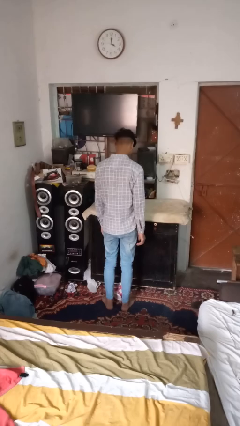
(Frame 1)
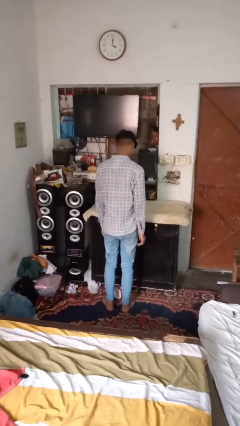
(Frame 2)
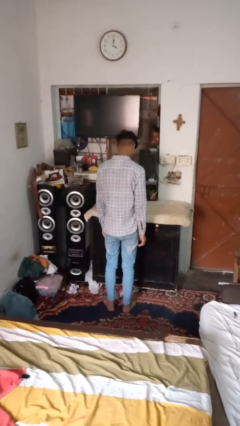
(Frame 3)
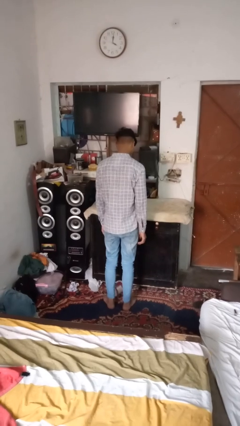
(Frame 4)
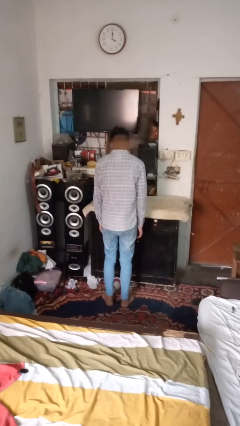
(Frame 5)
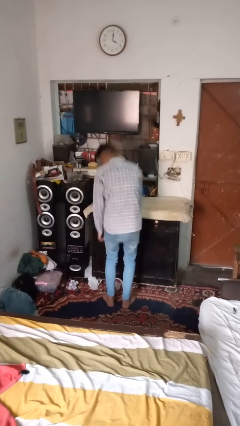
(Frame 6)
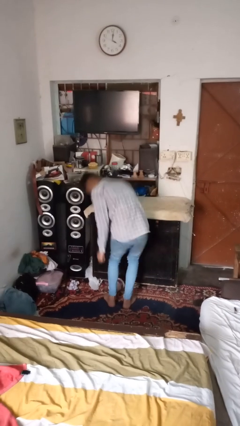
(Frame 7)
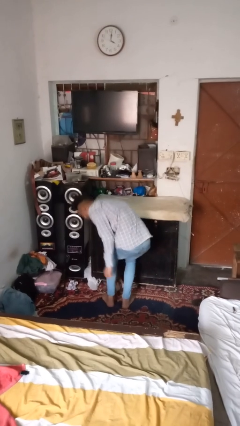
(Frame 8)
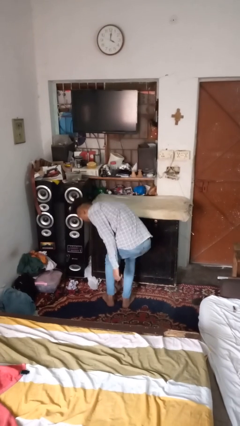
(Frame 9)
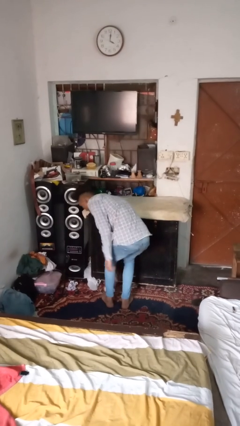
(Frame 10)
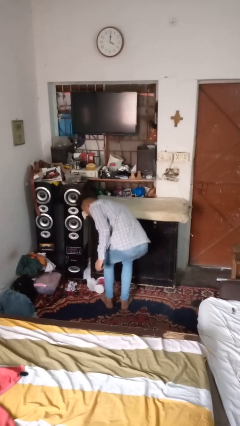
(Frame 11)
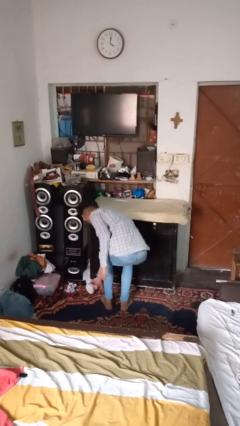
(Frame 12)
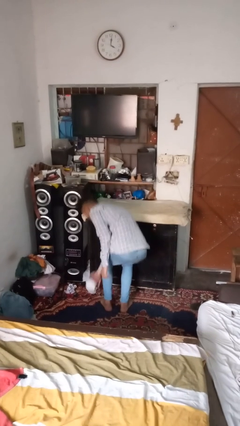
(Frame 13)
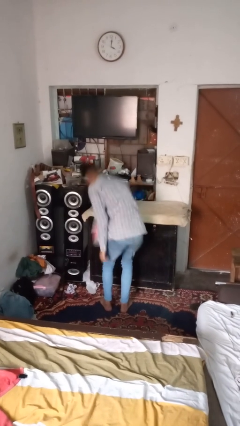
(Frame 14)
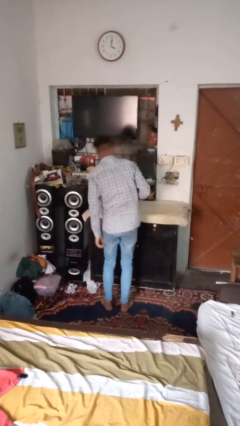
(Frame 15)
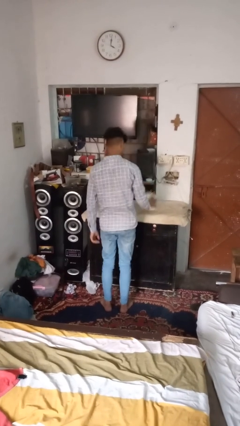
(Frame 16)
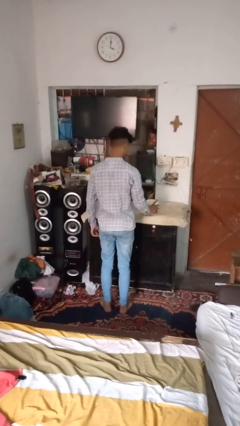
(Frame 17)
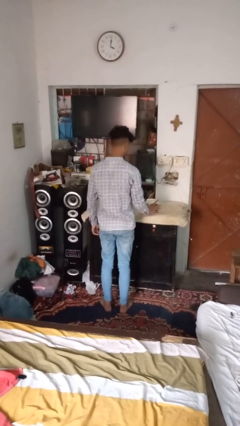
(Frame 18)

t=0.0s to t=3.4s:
person sets upright furniture

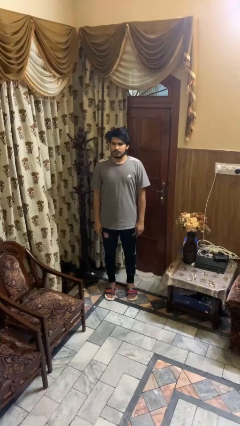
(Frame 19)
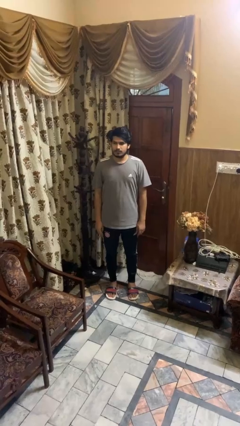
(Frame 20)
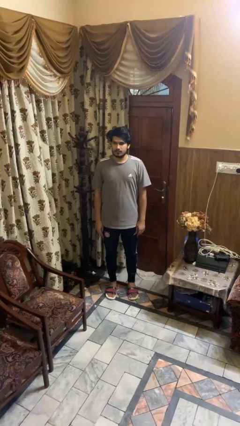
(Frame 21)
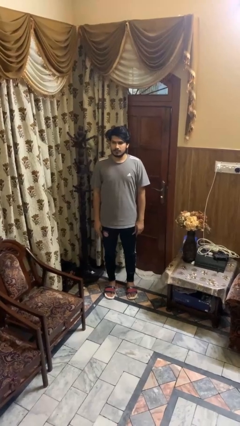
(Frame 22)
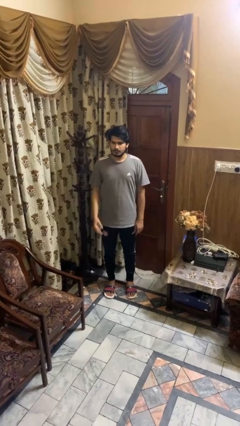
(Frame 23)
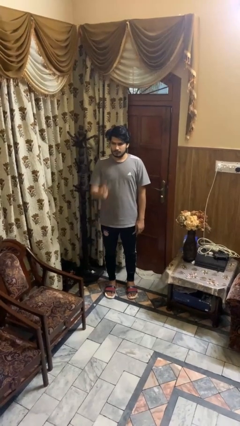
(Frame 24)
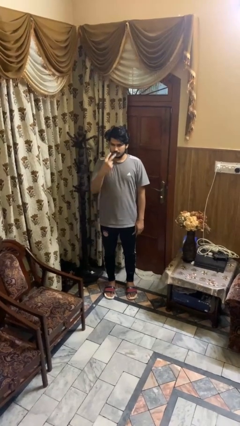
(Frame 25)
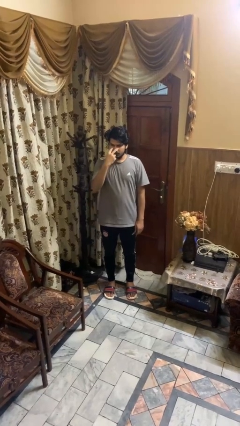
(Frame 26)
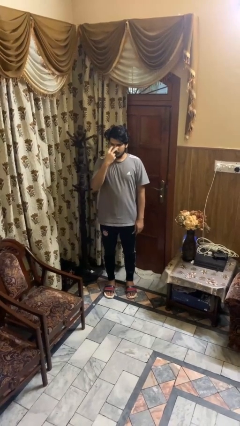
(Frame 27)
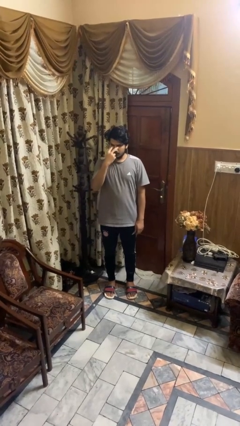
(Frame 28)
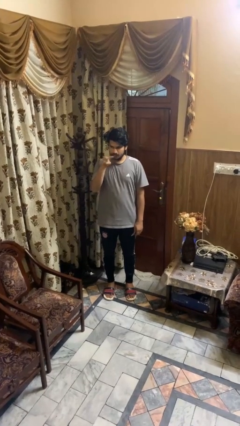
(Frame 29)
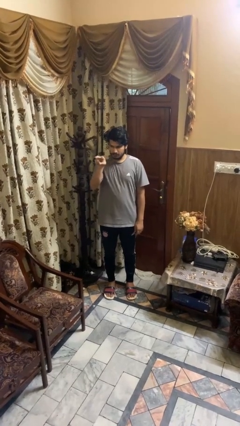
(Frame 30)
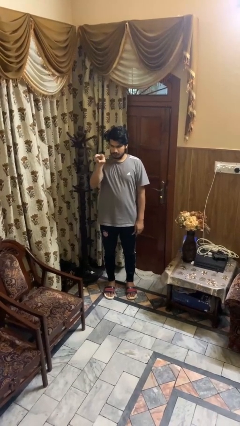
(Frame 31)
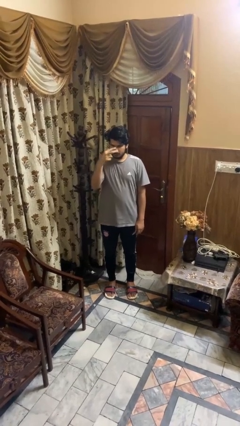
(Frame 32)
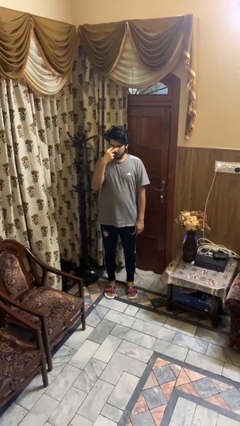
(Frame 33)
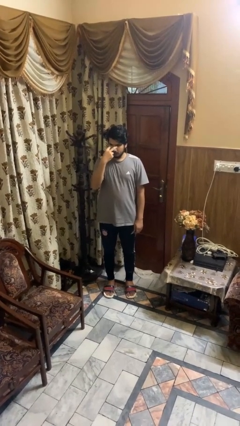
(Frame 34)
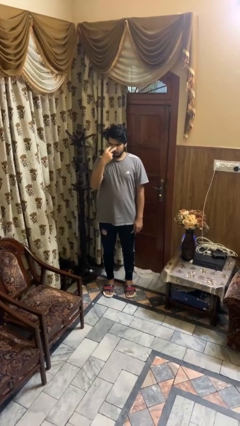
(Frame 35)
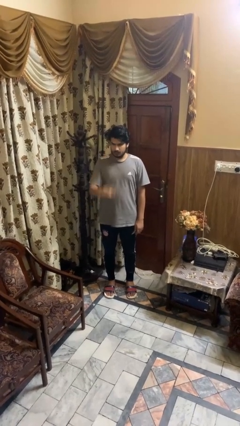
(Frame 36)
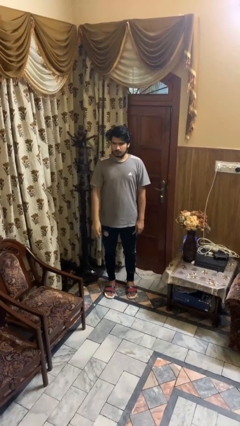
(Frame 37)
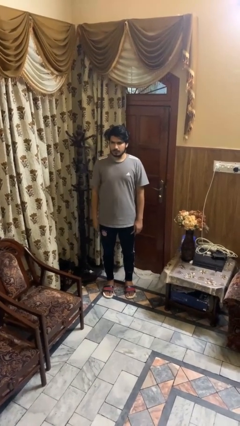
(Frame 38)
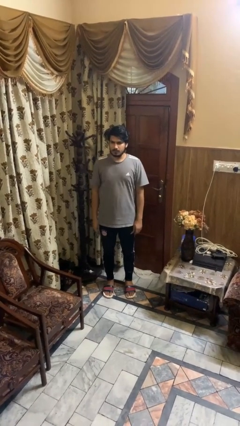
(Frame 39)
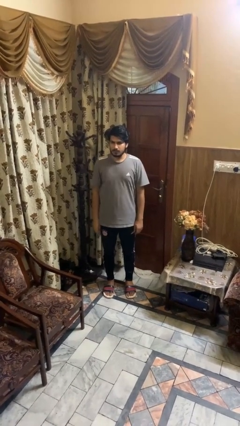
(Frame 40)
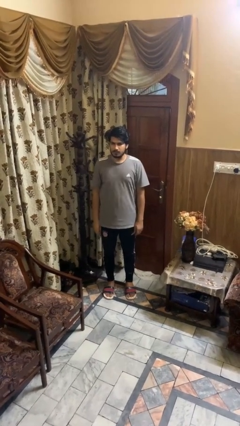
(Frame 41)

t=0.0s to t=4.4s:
person gestures watch closely

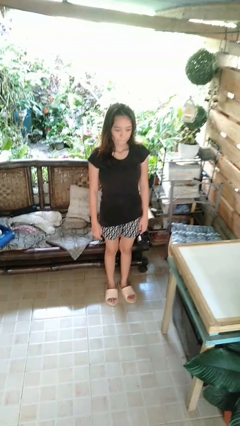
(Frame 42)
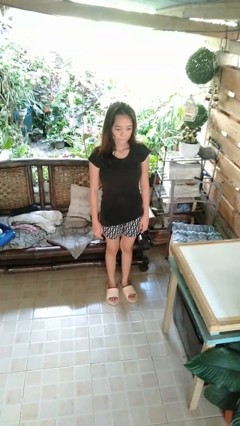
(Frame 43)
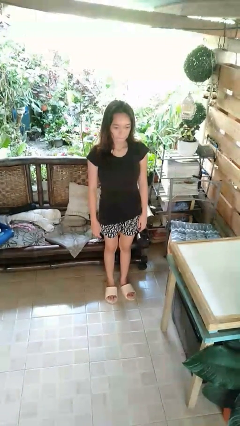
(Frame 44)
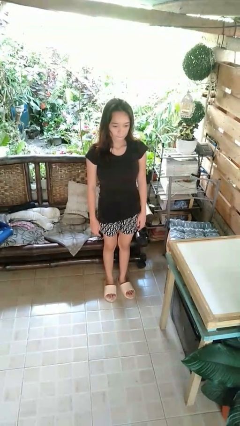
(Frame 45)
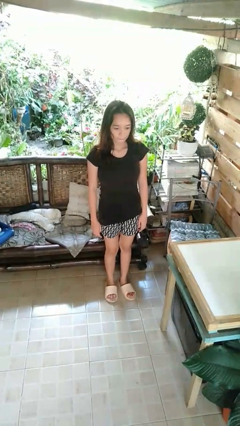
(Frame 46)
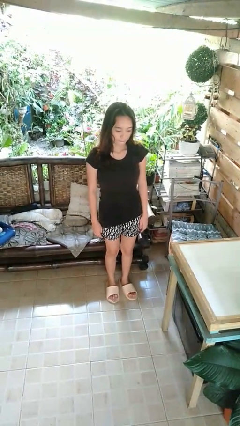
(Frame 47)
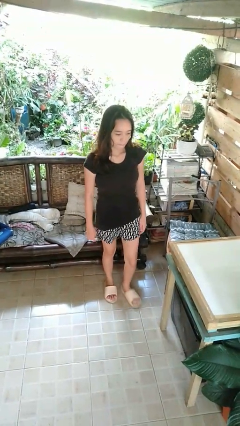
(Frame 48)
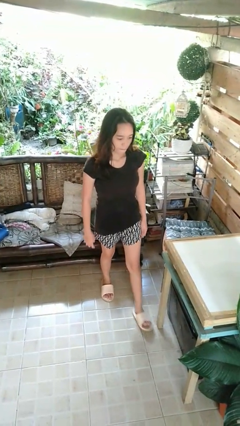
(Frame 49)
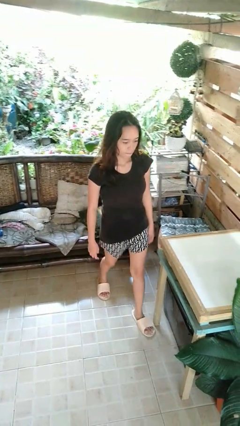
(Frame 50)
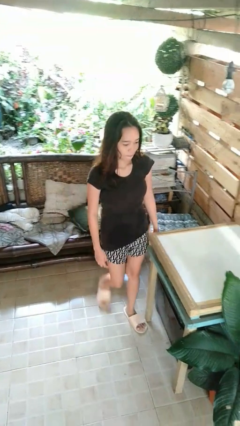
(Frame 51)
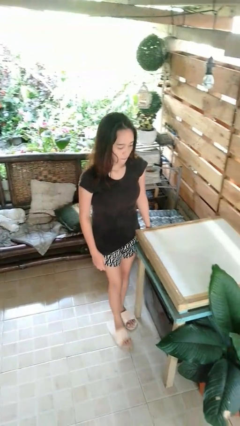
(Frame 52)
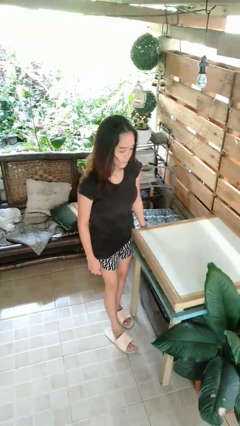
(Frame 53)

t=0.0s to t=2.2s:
person bumps into table

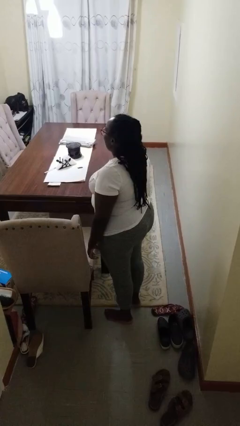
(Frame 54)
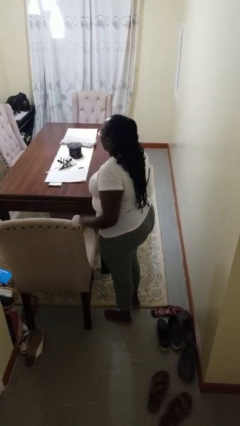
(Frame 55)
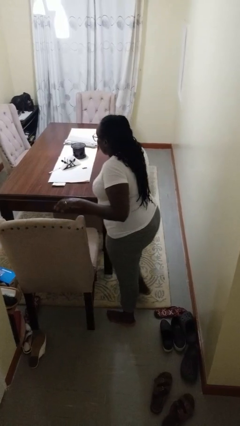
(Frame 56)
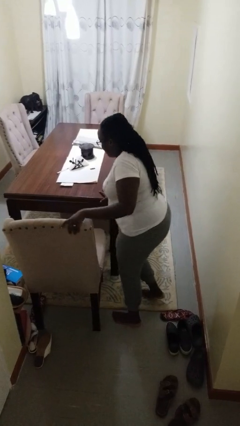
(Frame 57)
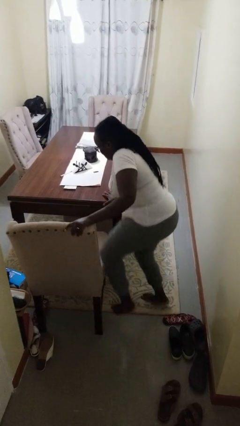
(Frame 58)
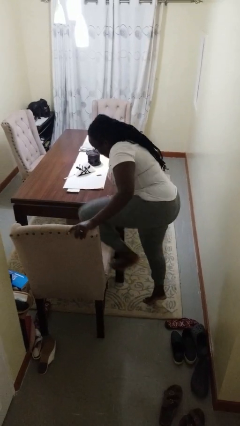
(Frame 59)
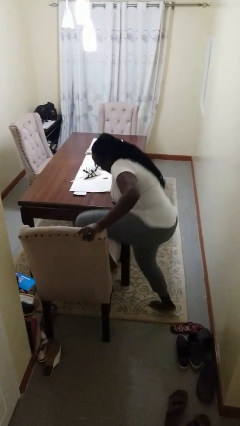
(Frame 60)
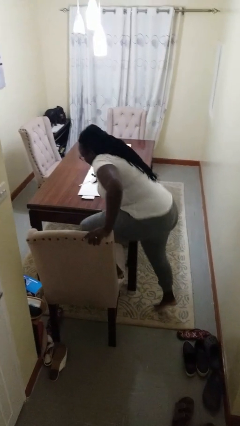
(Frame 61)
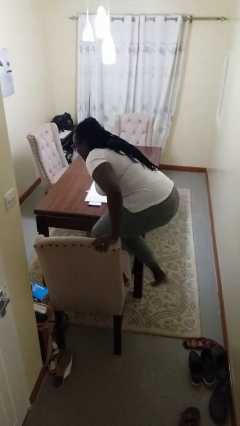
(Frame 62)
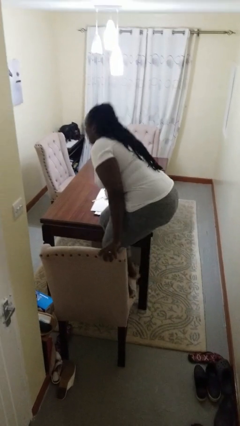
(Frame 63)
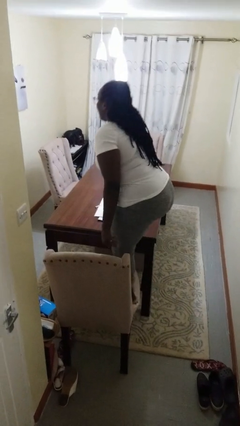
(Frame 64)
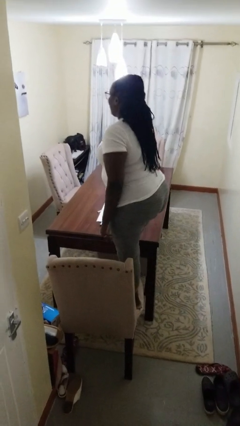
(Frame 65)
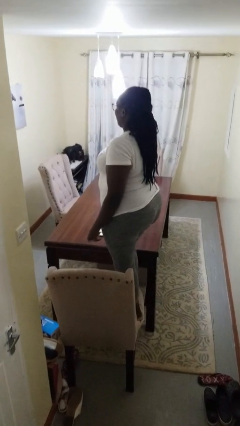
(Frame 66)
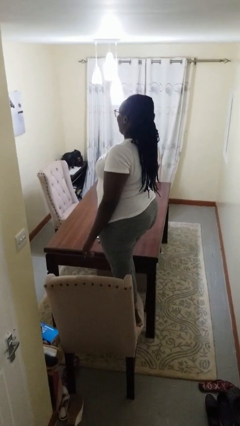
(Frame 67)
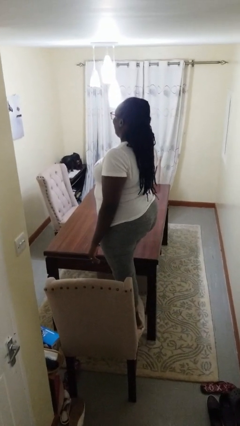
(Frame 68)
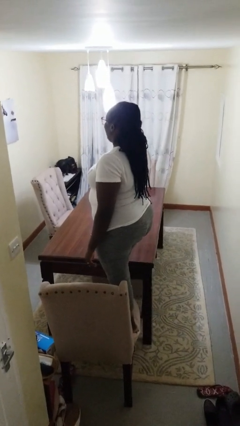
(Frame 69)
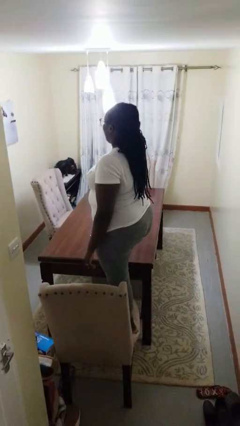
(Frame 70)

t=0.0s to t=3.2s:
person climbs on chair

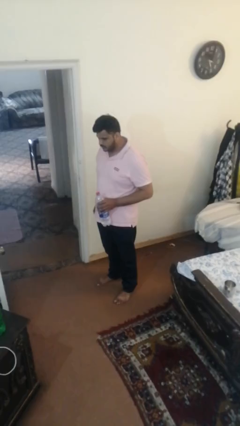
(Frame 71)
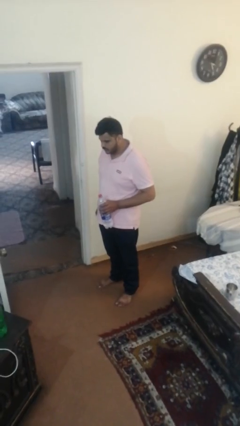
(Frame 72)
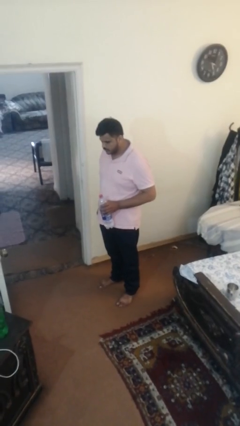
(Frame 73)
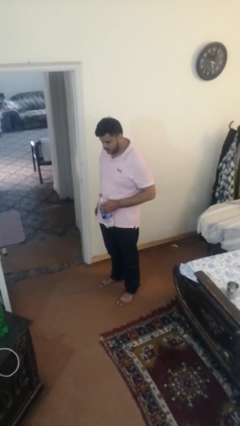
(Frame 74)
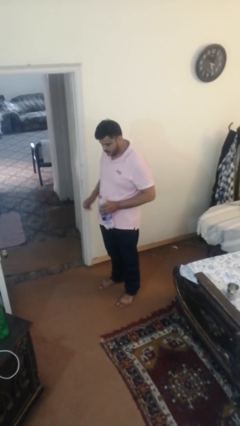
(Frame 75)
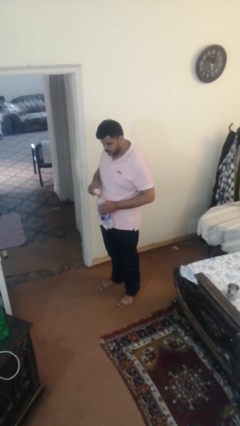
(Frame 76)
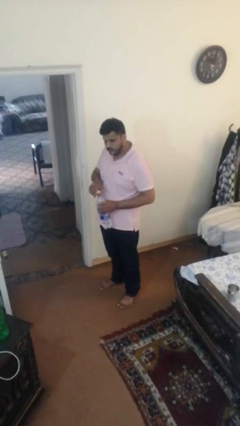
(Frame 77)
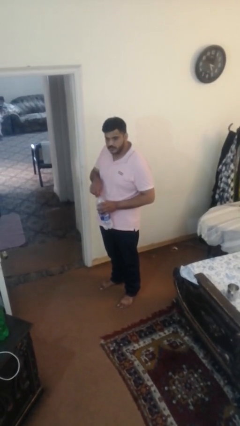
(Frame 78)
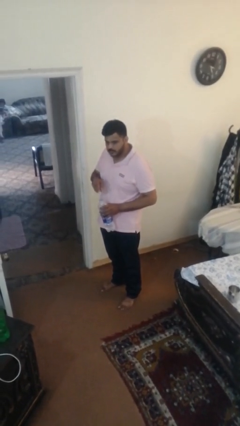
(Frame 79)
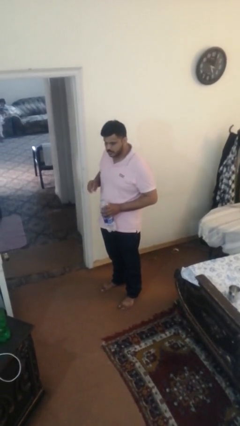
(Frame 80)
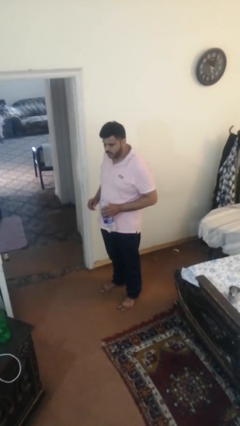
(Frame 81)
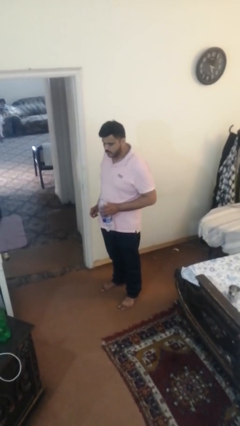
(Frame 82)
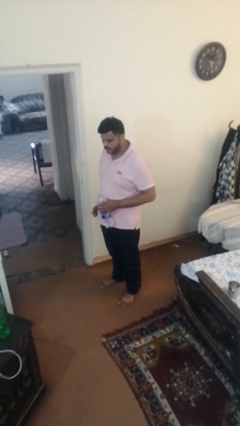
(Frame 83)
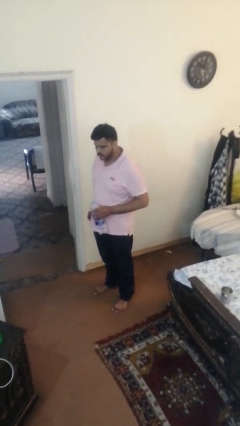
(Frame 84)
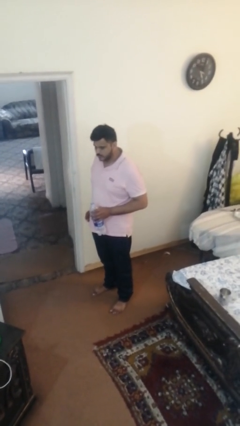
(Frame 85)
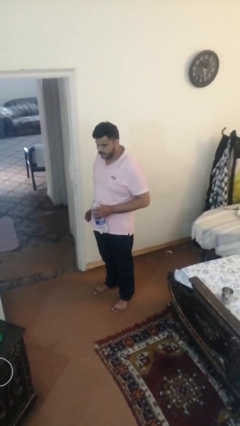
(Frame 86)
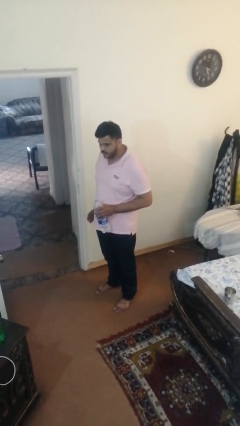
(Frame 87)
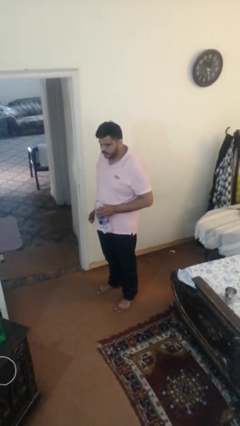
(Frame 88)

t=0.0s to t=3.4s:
person unscrews lid from bottle

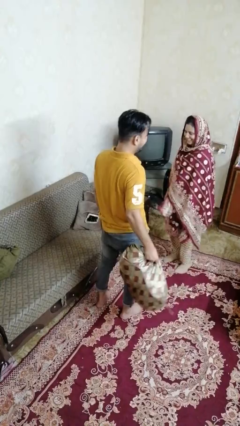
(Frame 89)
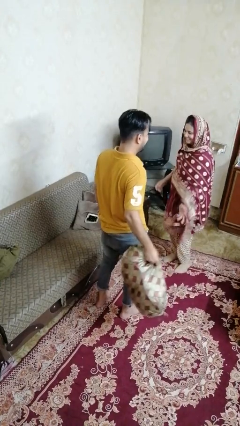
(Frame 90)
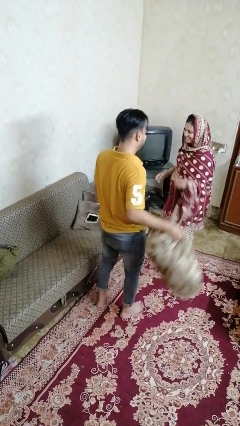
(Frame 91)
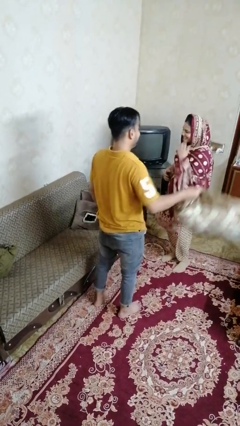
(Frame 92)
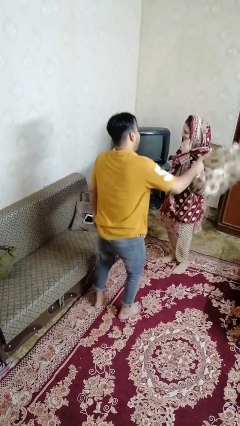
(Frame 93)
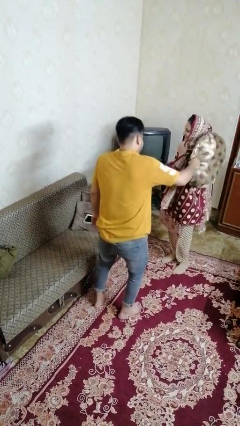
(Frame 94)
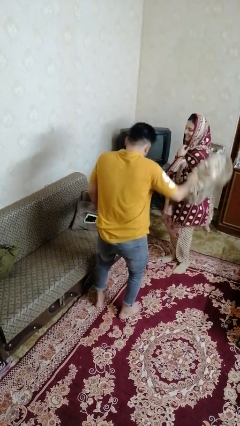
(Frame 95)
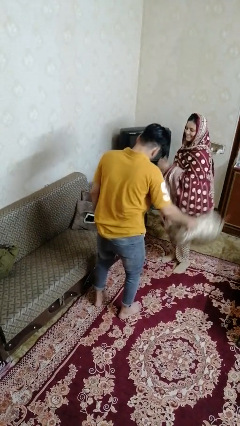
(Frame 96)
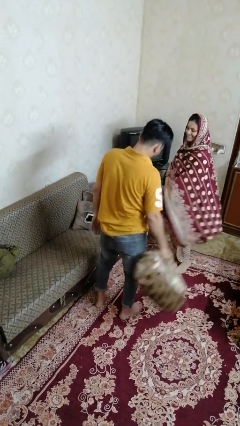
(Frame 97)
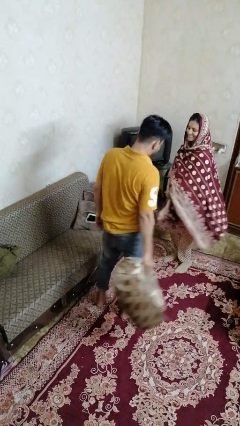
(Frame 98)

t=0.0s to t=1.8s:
person hits person with pillow
